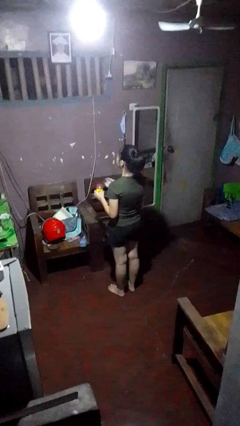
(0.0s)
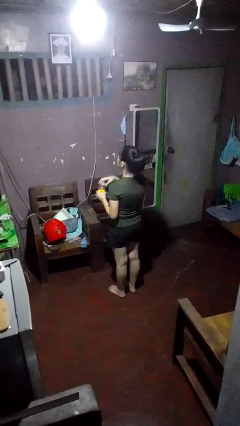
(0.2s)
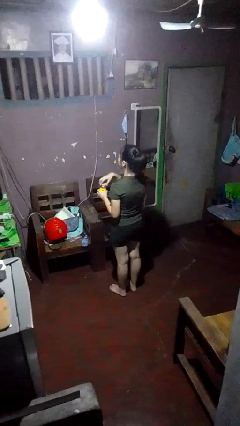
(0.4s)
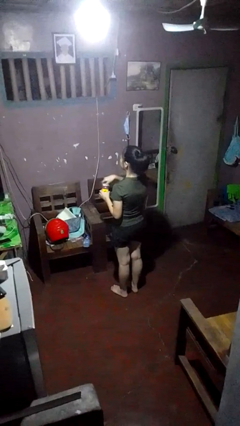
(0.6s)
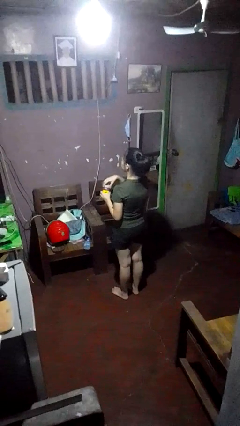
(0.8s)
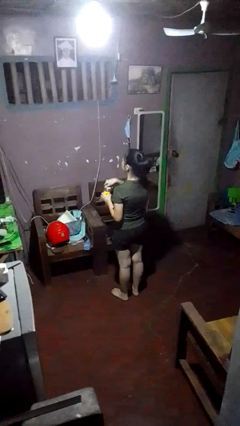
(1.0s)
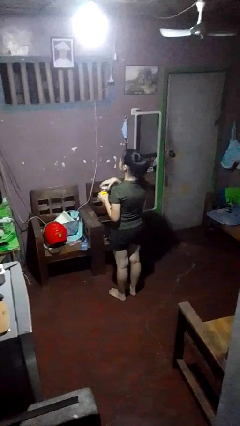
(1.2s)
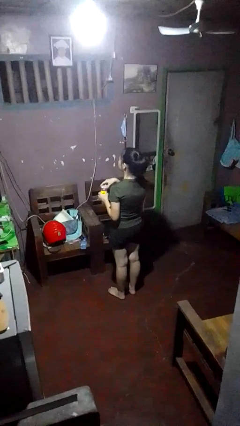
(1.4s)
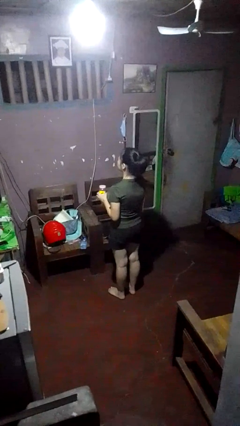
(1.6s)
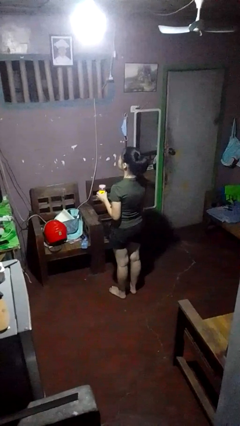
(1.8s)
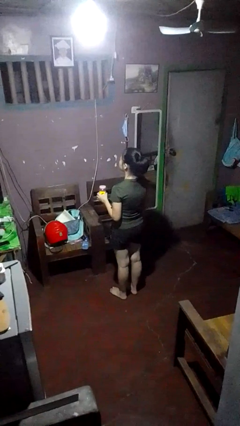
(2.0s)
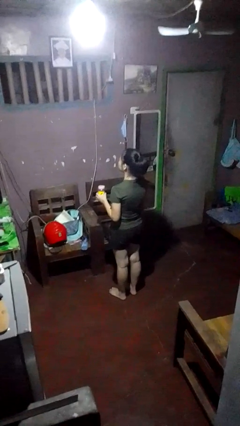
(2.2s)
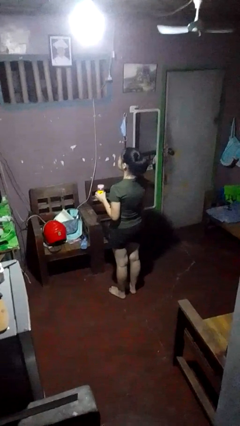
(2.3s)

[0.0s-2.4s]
person closes jar

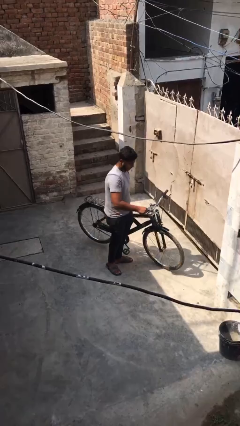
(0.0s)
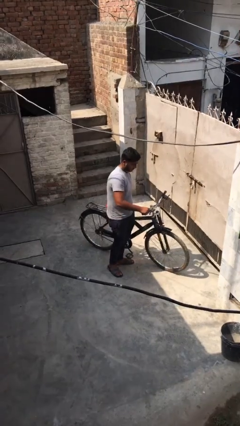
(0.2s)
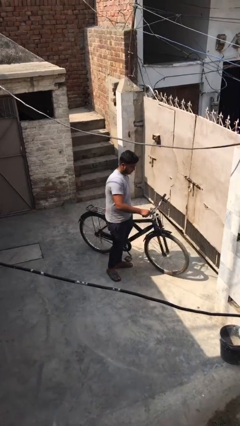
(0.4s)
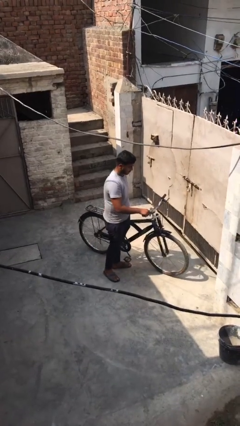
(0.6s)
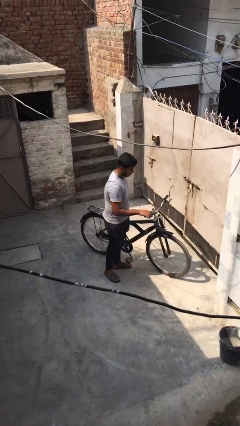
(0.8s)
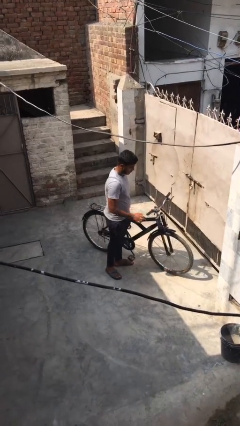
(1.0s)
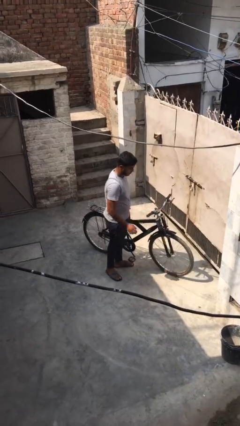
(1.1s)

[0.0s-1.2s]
person puts down object on floor

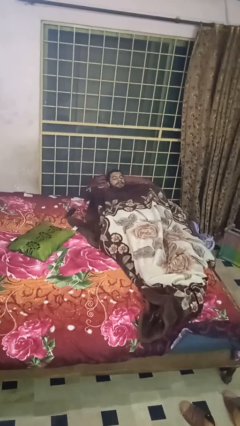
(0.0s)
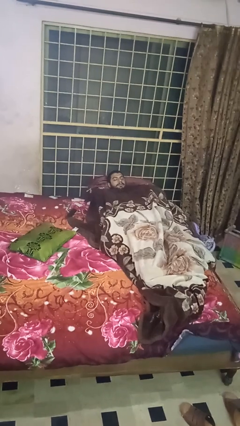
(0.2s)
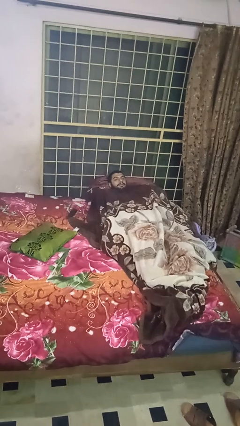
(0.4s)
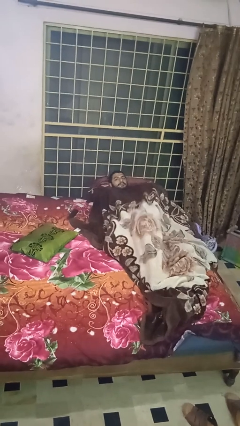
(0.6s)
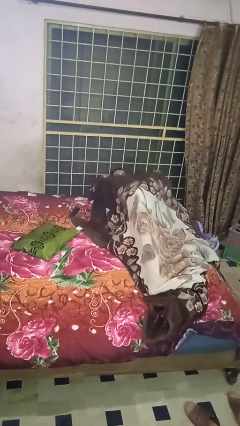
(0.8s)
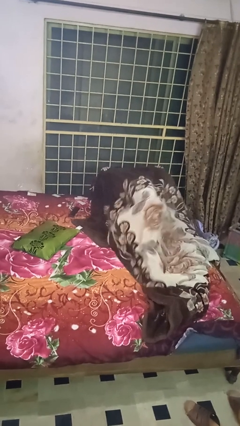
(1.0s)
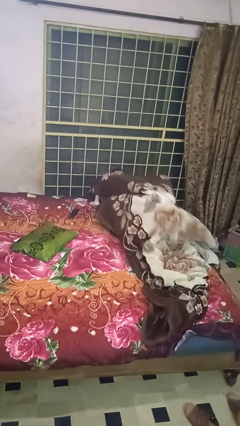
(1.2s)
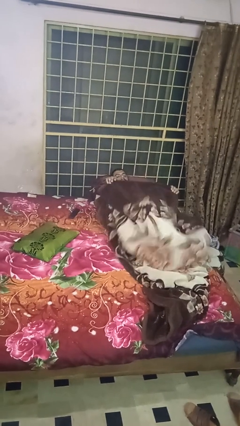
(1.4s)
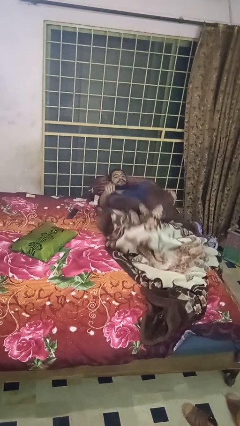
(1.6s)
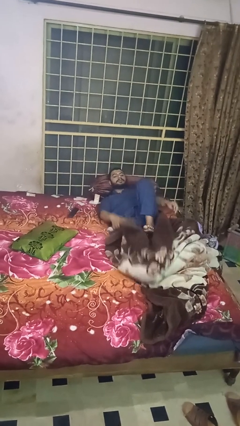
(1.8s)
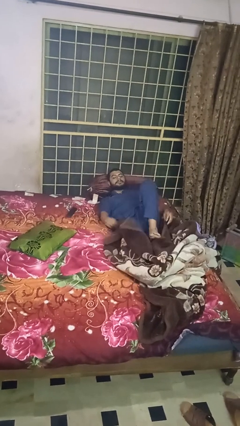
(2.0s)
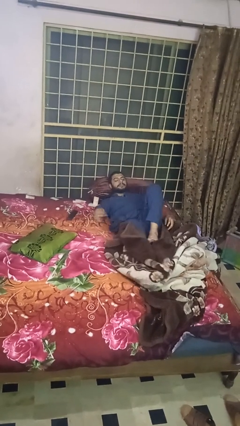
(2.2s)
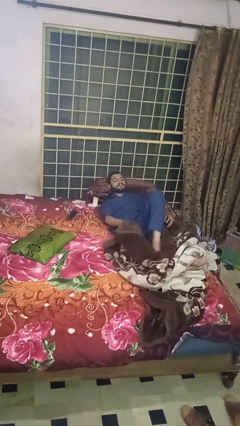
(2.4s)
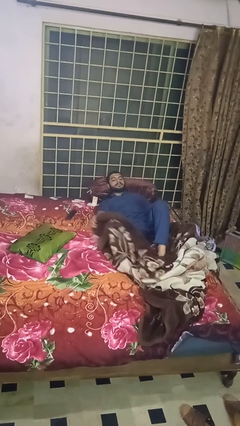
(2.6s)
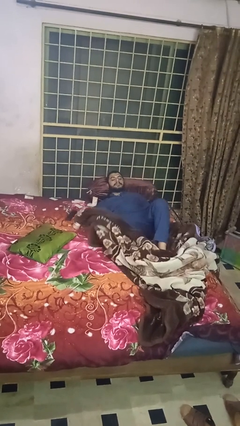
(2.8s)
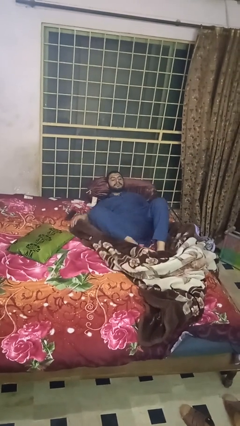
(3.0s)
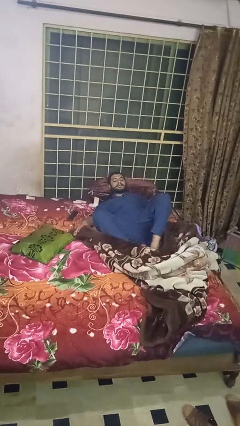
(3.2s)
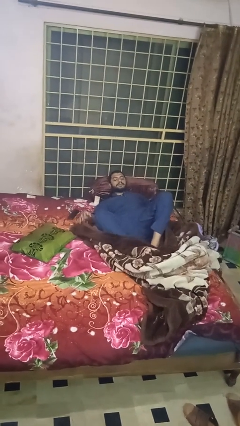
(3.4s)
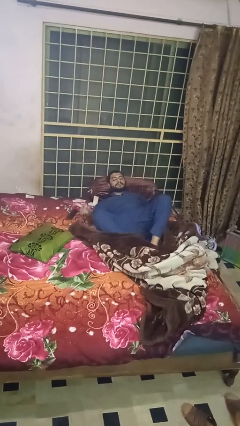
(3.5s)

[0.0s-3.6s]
person uncovers with blanket

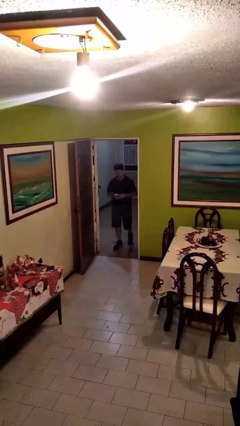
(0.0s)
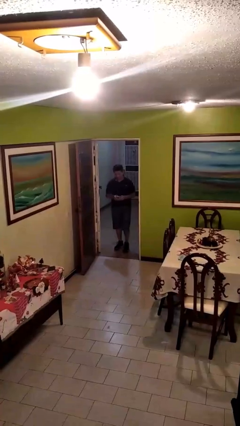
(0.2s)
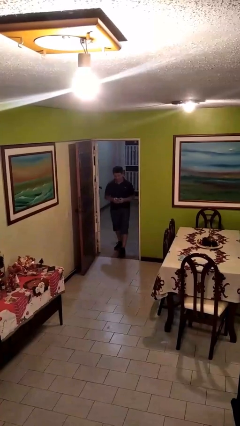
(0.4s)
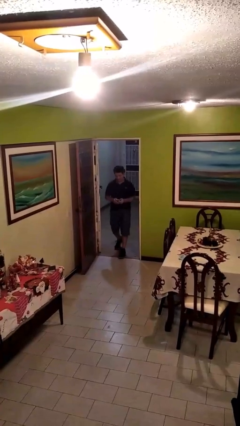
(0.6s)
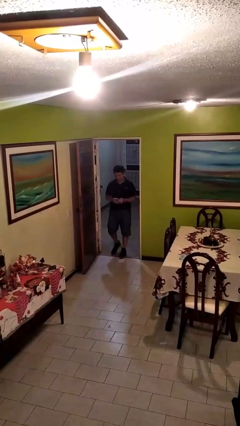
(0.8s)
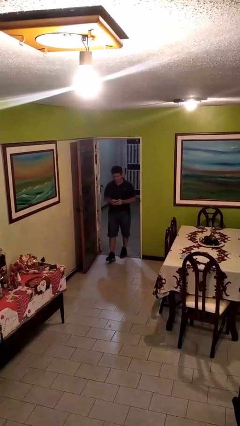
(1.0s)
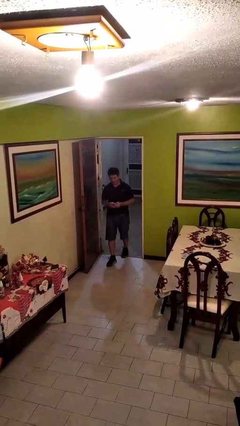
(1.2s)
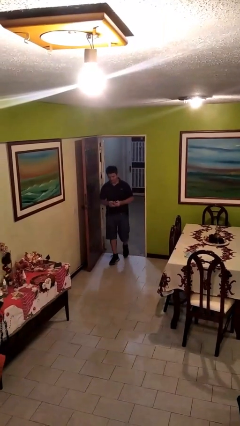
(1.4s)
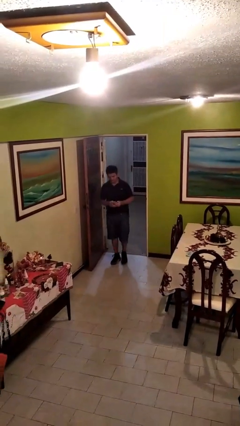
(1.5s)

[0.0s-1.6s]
person enters scene through structure

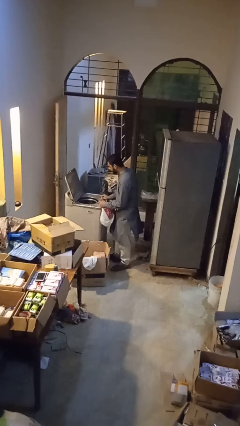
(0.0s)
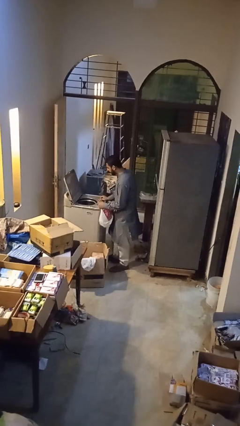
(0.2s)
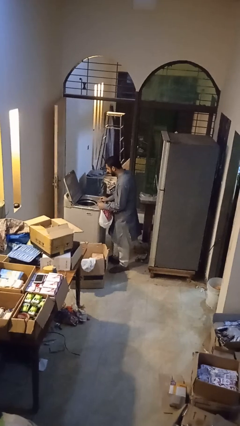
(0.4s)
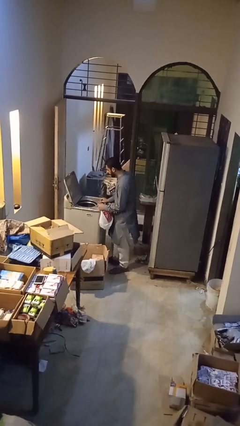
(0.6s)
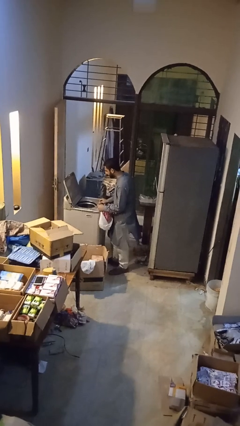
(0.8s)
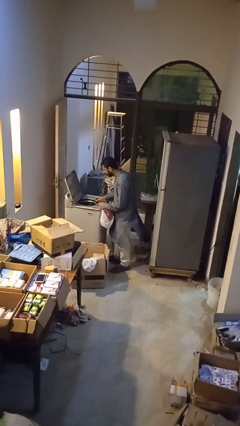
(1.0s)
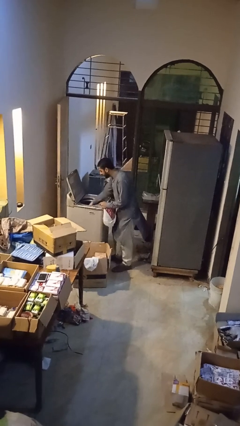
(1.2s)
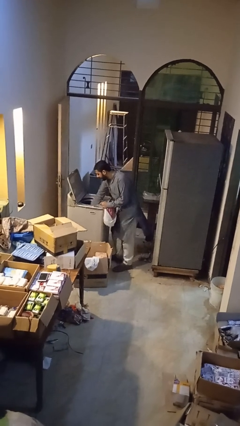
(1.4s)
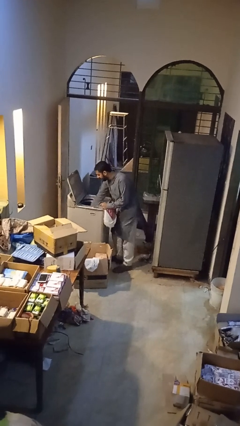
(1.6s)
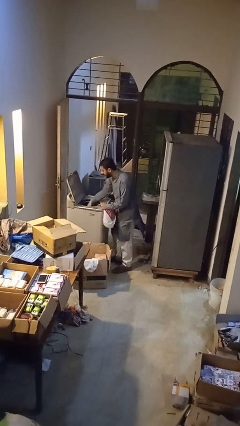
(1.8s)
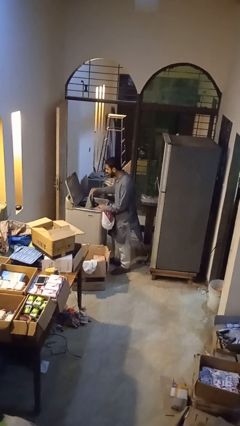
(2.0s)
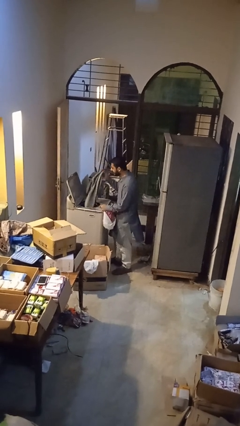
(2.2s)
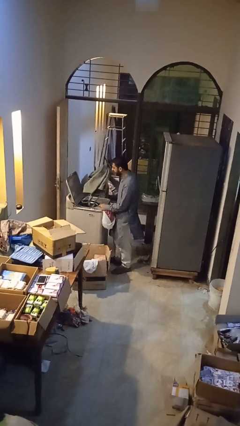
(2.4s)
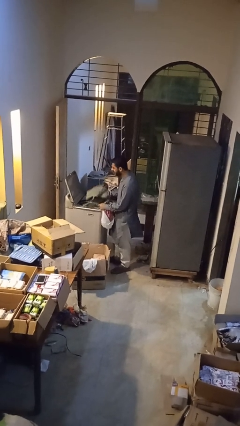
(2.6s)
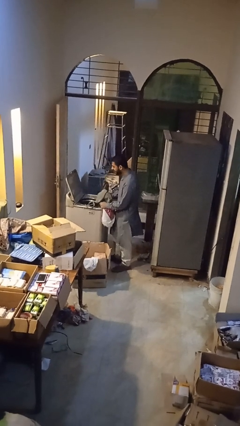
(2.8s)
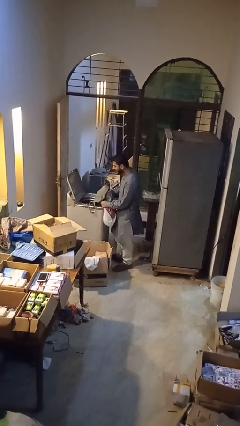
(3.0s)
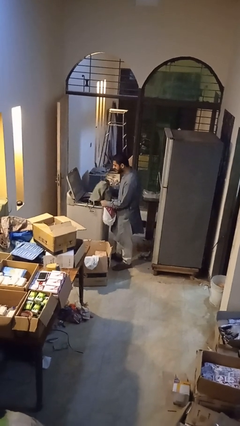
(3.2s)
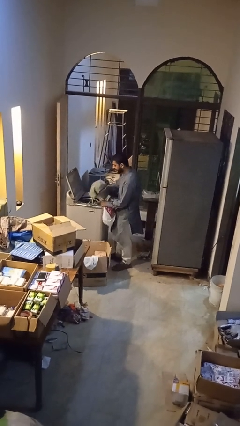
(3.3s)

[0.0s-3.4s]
person unloads dryer

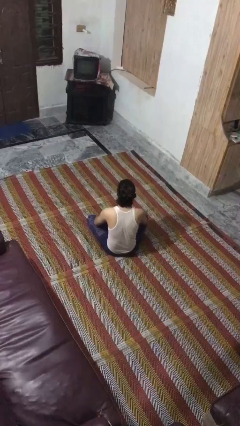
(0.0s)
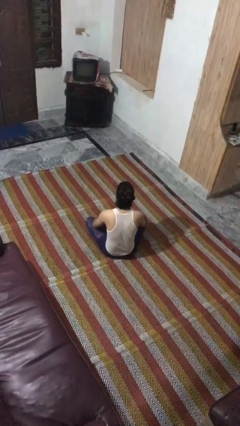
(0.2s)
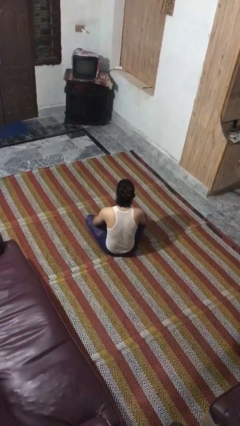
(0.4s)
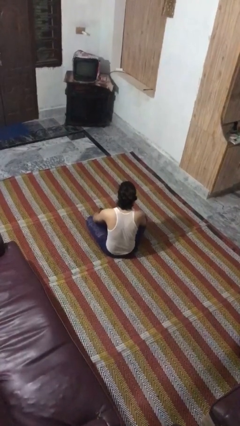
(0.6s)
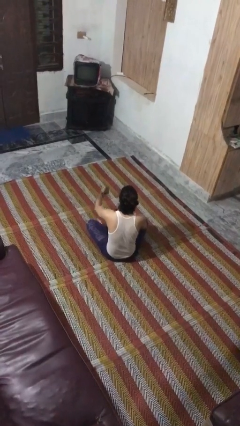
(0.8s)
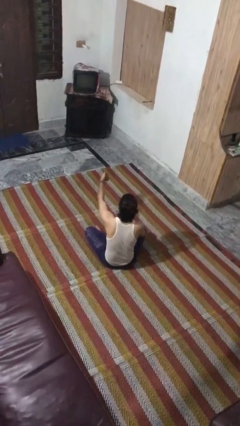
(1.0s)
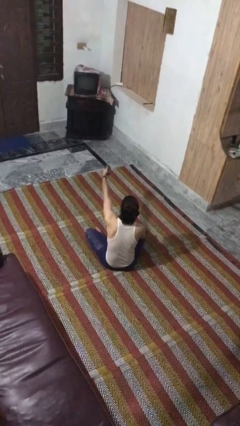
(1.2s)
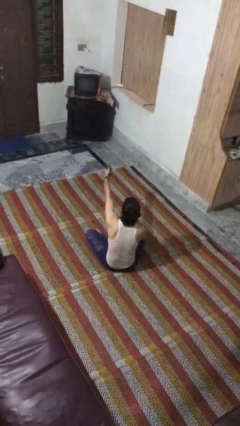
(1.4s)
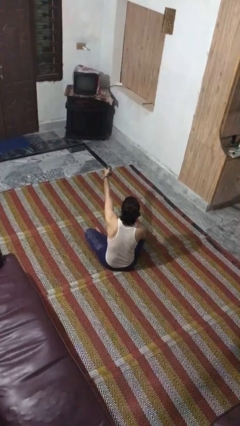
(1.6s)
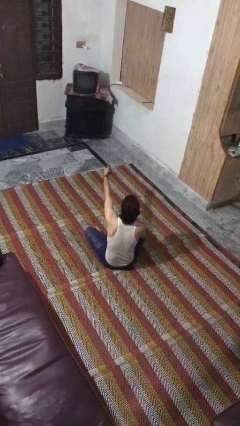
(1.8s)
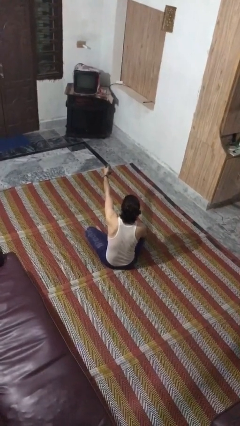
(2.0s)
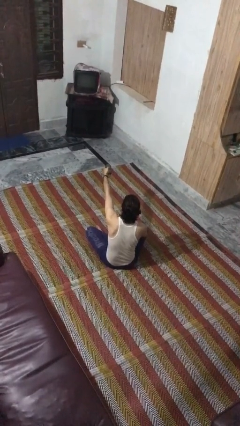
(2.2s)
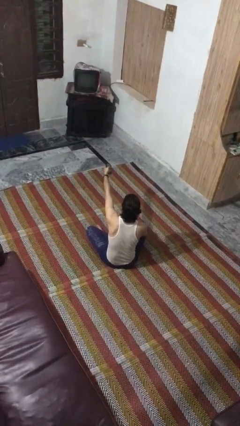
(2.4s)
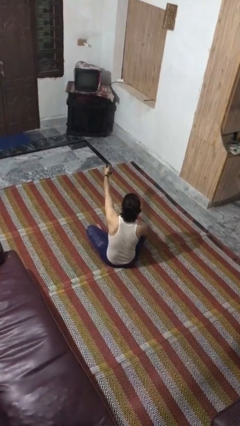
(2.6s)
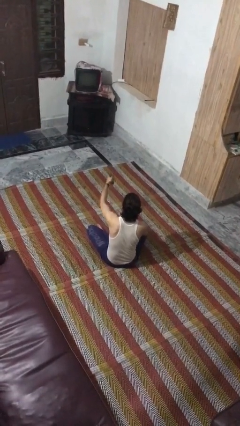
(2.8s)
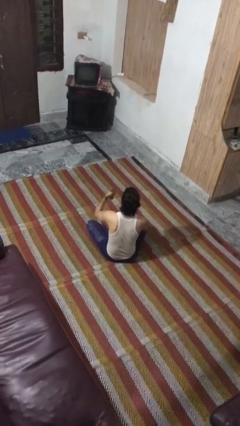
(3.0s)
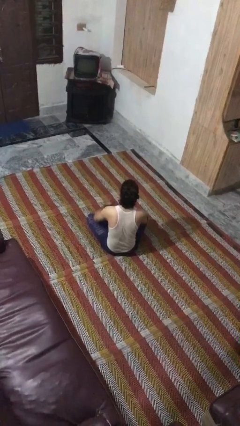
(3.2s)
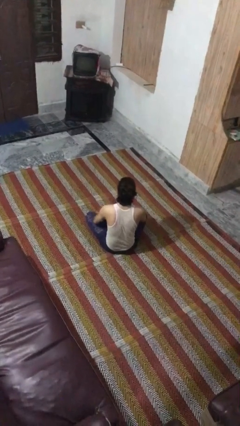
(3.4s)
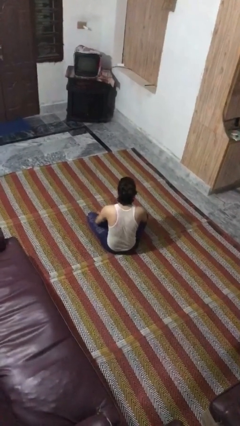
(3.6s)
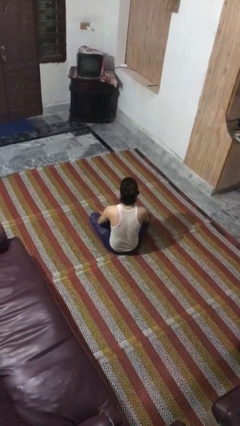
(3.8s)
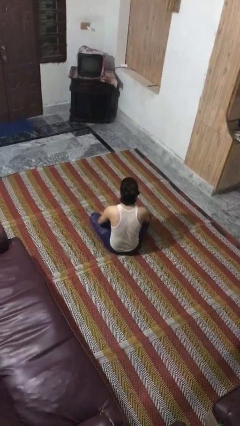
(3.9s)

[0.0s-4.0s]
person uses television remote

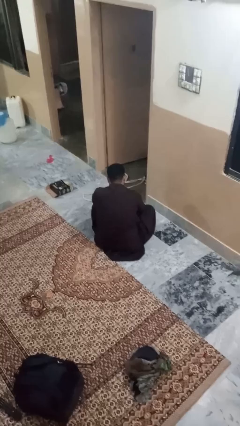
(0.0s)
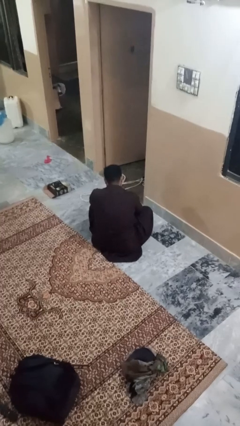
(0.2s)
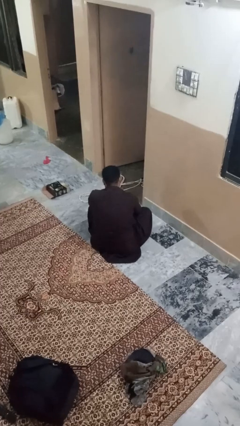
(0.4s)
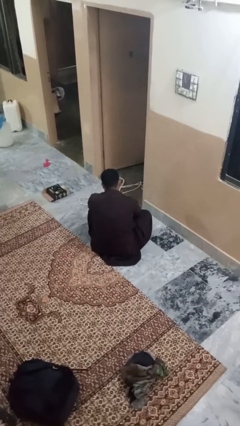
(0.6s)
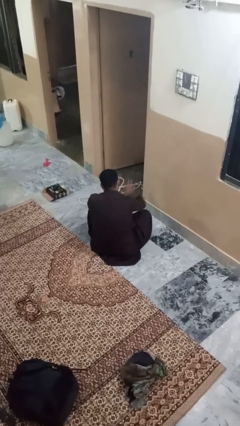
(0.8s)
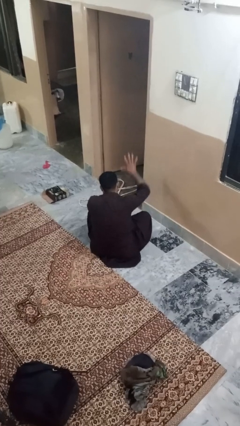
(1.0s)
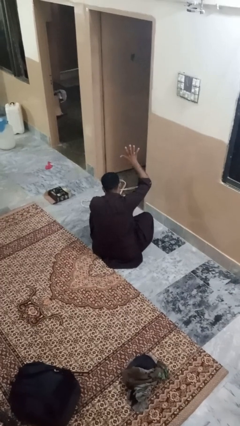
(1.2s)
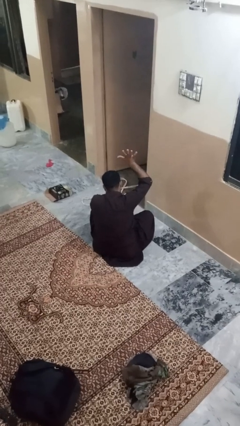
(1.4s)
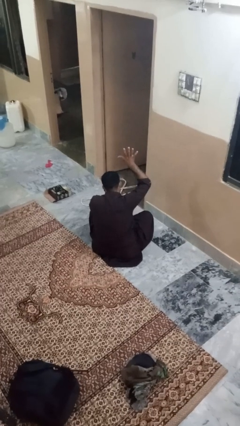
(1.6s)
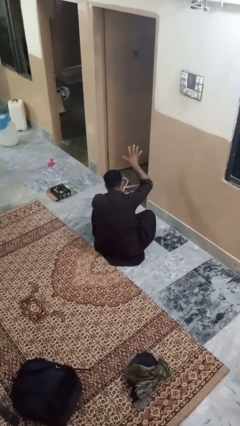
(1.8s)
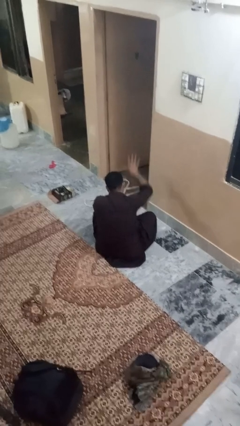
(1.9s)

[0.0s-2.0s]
person gestures number five
